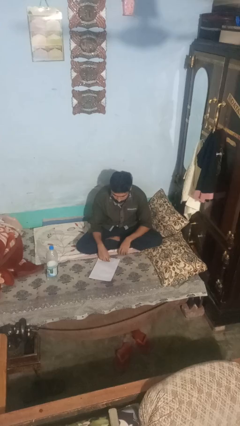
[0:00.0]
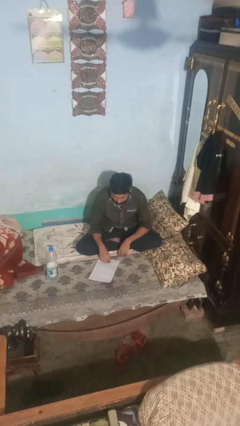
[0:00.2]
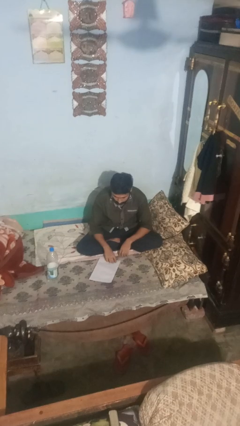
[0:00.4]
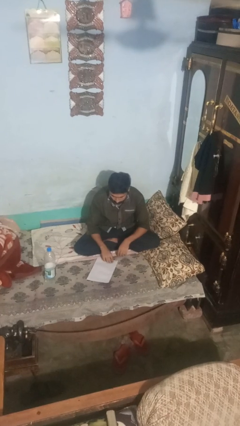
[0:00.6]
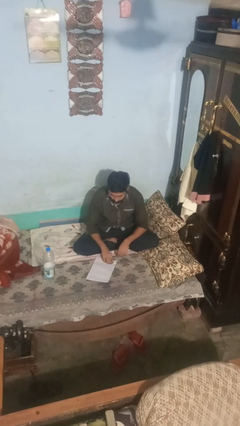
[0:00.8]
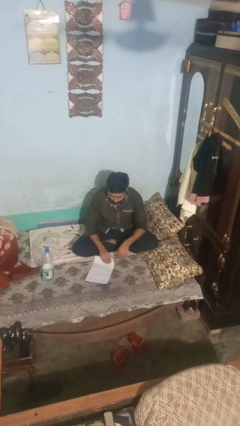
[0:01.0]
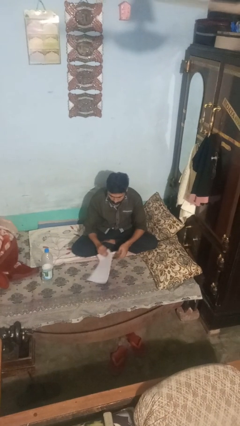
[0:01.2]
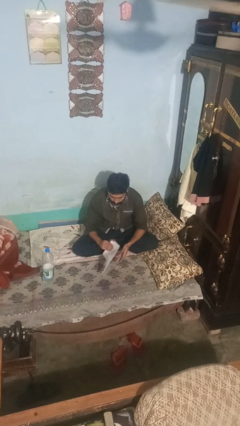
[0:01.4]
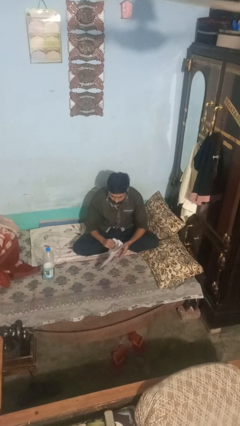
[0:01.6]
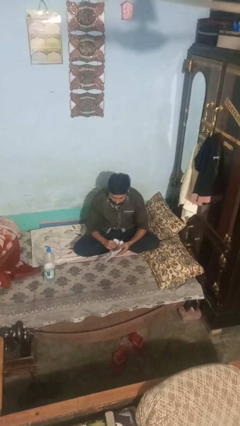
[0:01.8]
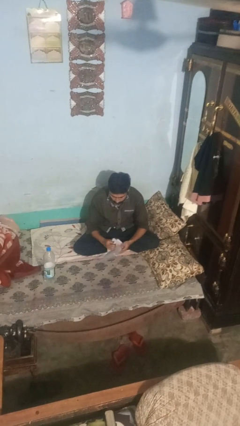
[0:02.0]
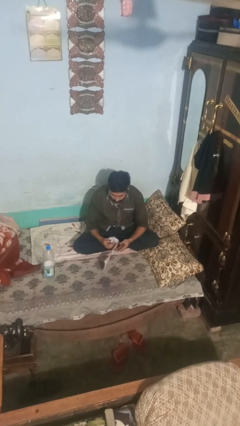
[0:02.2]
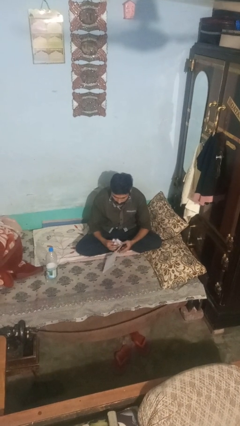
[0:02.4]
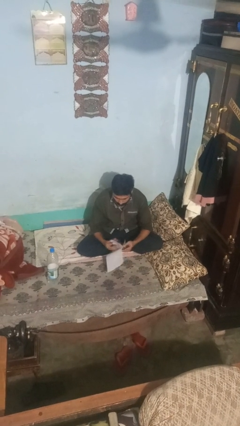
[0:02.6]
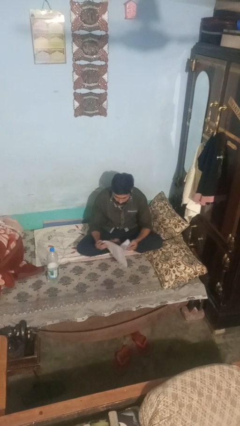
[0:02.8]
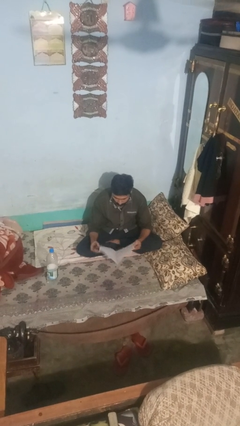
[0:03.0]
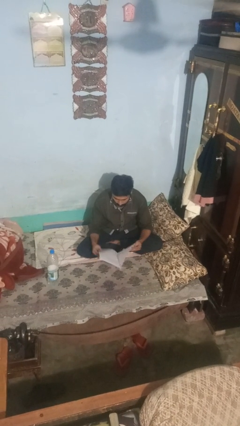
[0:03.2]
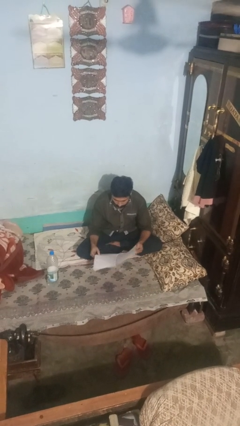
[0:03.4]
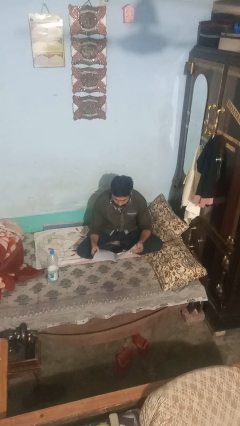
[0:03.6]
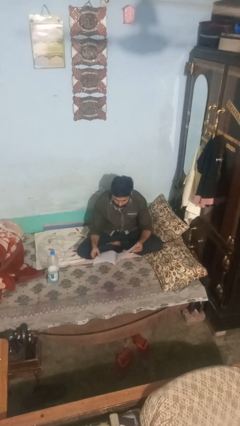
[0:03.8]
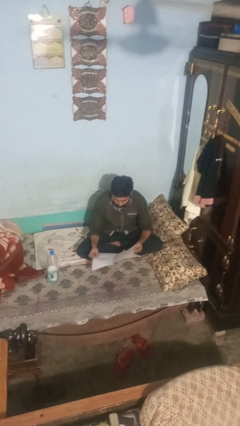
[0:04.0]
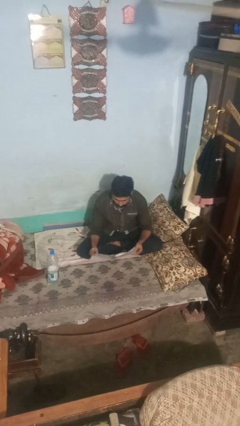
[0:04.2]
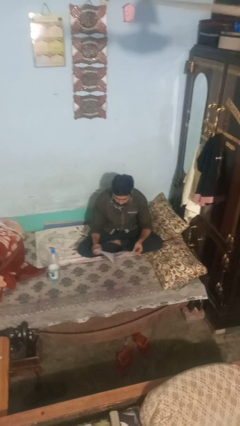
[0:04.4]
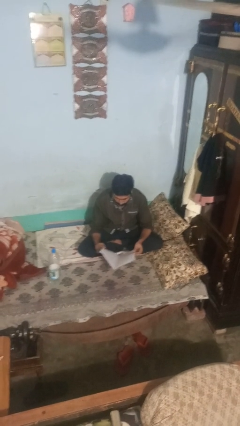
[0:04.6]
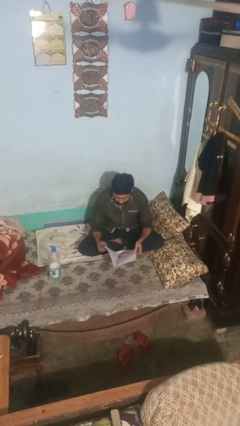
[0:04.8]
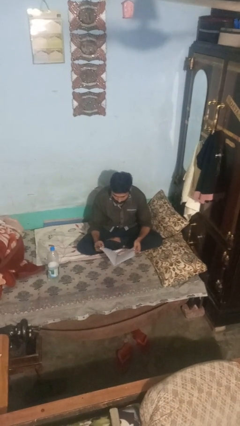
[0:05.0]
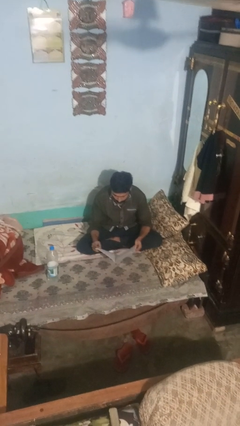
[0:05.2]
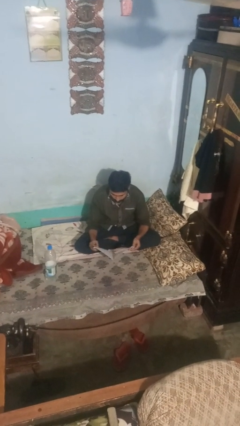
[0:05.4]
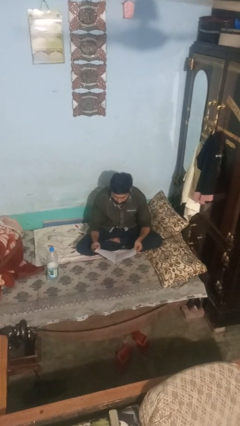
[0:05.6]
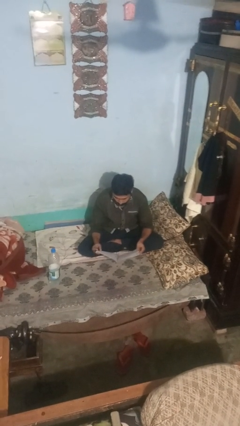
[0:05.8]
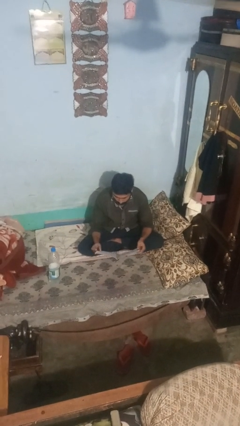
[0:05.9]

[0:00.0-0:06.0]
person reads newspaper

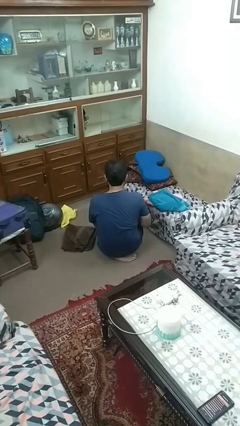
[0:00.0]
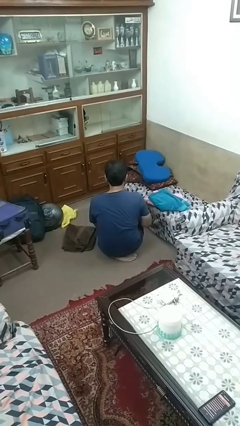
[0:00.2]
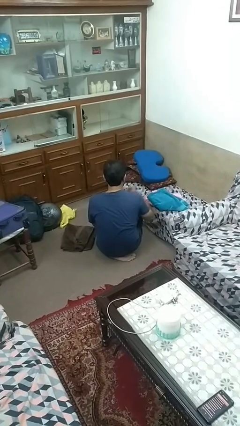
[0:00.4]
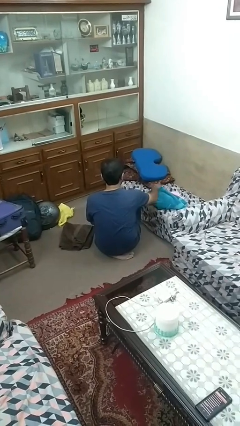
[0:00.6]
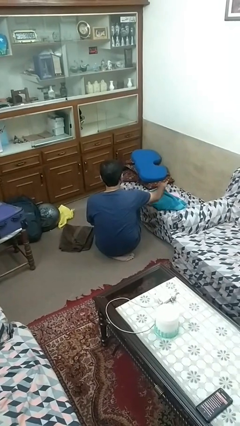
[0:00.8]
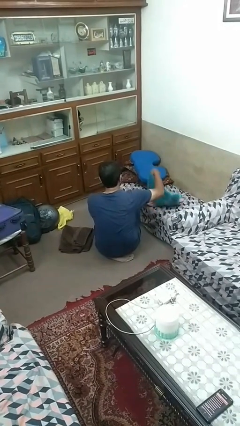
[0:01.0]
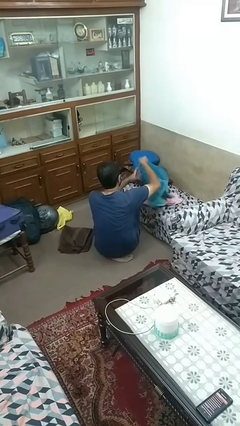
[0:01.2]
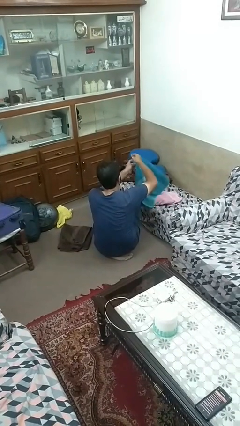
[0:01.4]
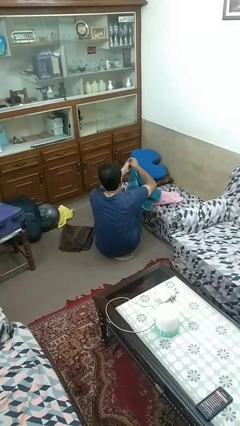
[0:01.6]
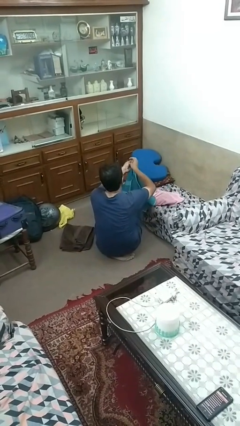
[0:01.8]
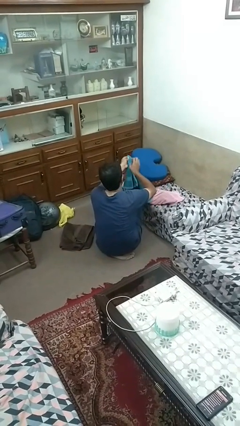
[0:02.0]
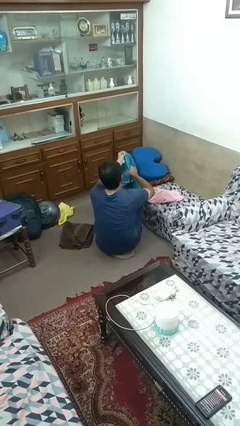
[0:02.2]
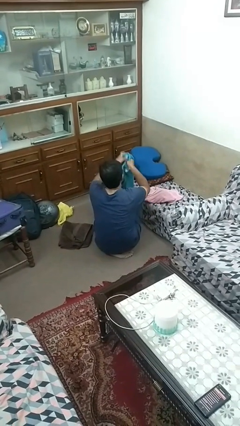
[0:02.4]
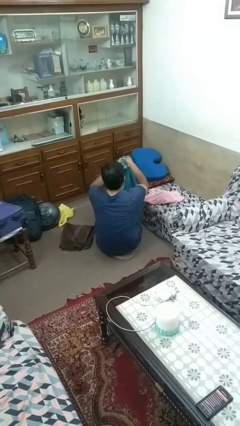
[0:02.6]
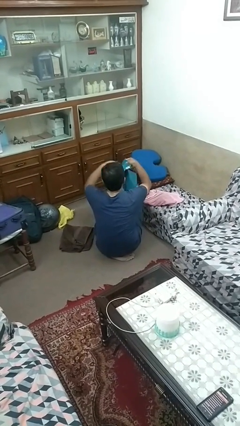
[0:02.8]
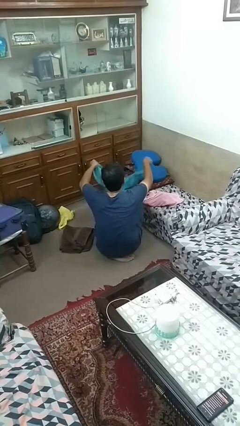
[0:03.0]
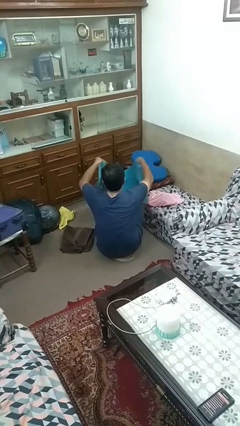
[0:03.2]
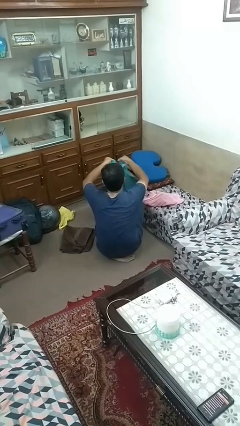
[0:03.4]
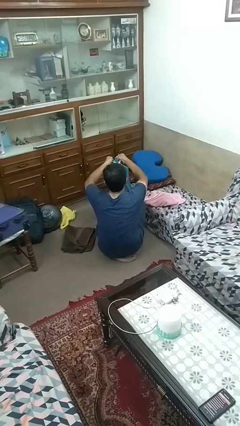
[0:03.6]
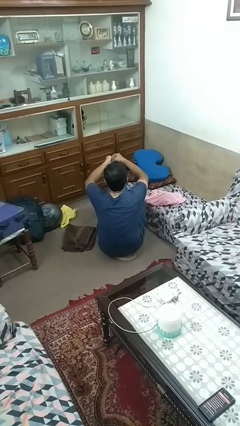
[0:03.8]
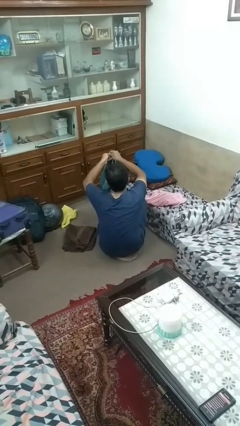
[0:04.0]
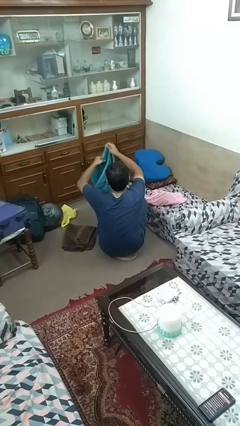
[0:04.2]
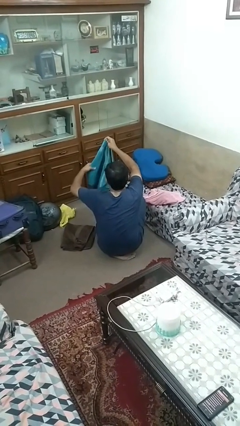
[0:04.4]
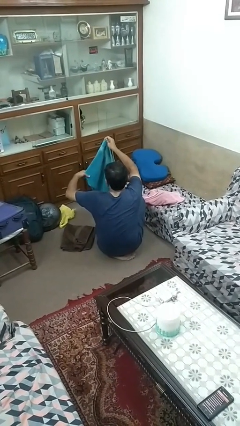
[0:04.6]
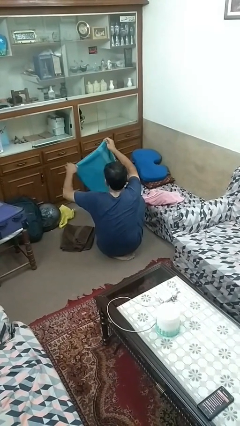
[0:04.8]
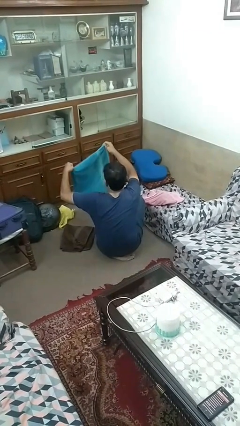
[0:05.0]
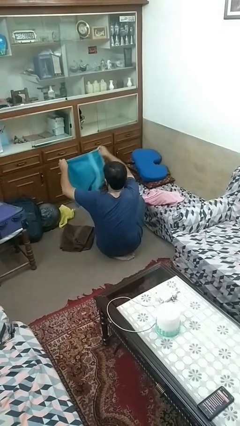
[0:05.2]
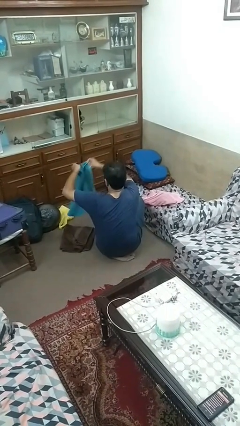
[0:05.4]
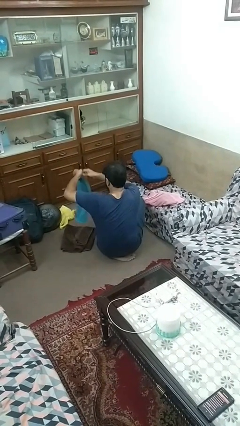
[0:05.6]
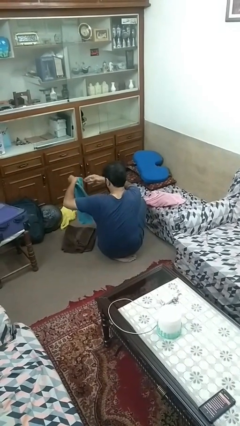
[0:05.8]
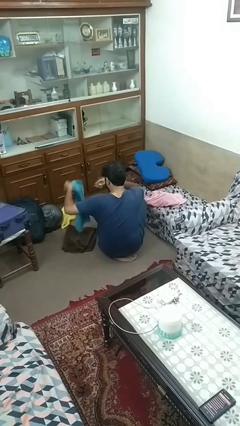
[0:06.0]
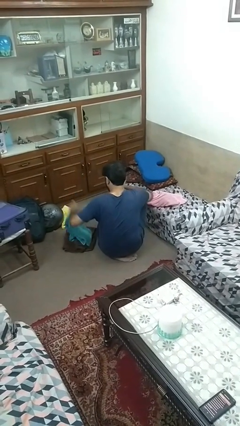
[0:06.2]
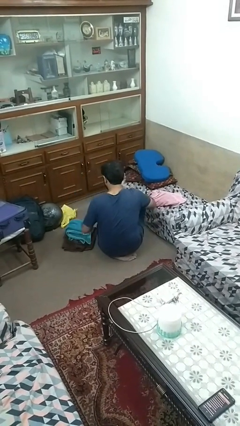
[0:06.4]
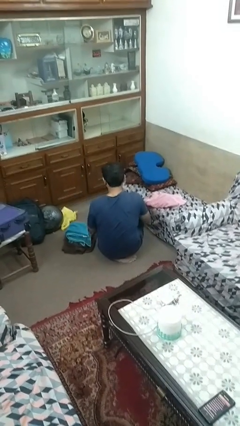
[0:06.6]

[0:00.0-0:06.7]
person folds towel

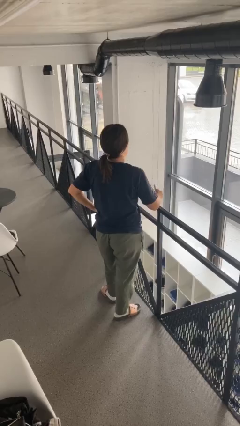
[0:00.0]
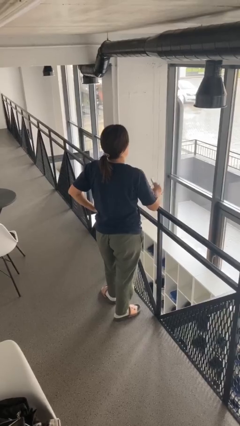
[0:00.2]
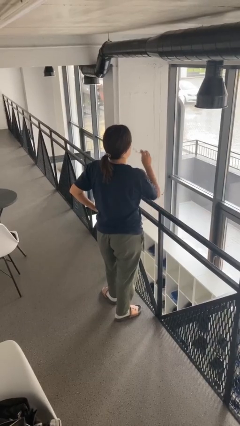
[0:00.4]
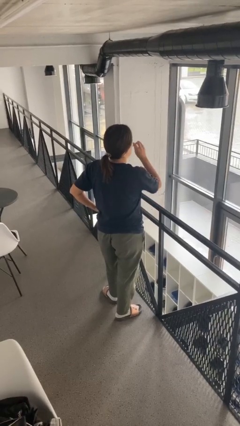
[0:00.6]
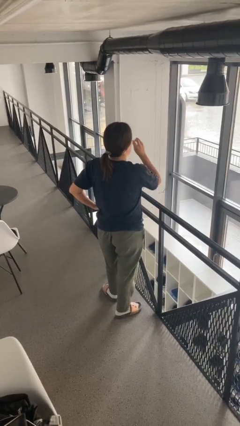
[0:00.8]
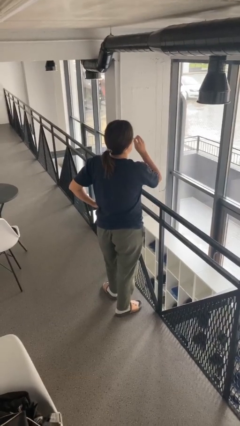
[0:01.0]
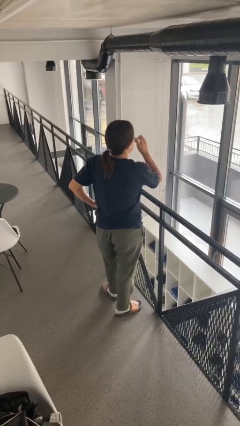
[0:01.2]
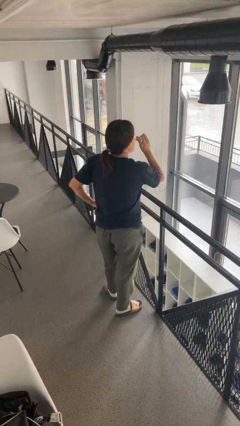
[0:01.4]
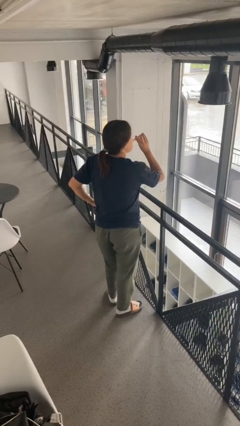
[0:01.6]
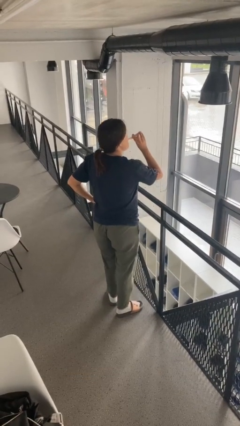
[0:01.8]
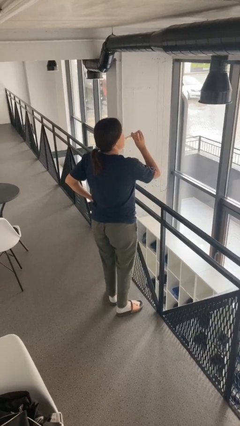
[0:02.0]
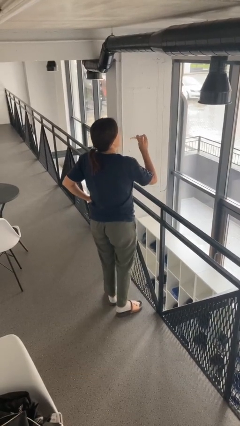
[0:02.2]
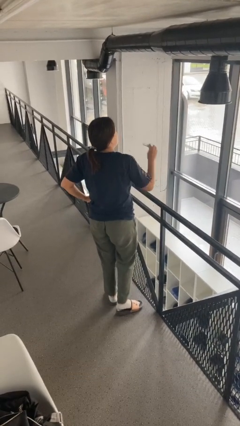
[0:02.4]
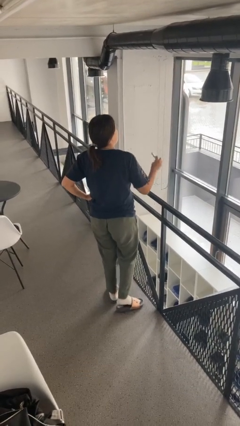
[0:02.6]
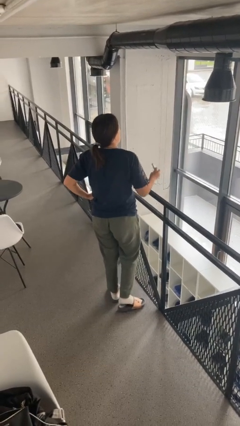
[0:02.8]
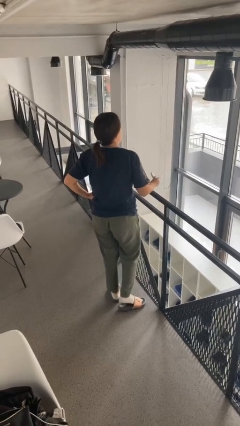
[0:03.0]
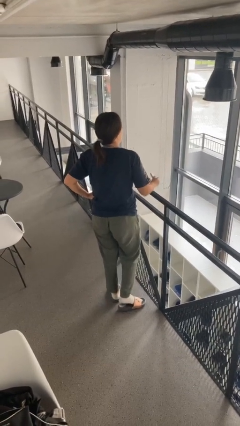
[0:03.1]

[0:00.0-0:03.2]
person vapes

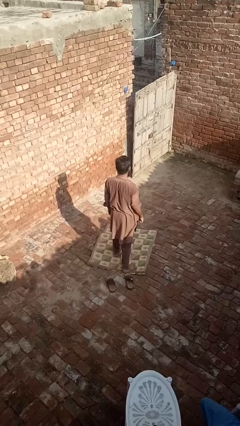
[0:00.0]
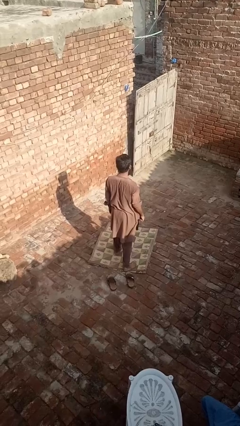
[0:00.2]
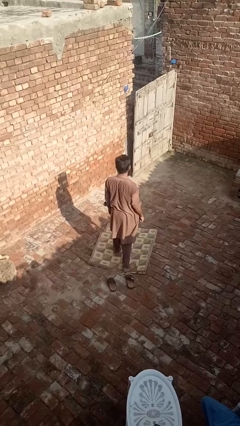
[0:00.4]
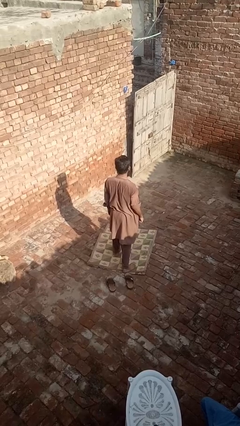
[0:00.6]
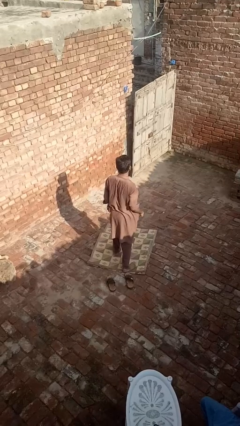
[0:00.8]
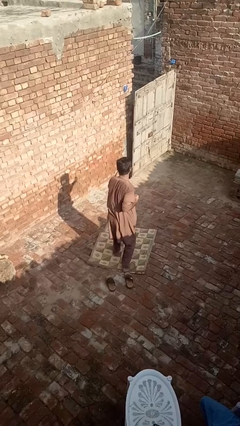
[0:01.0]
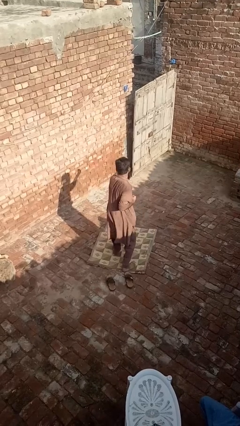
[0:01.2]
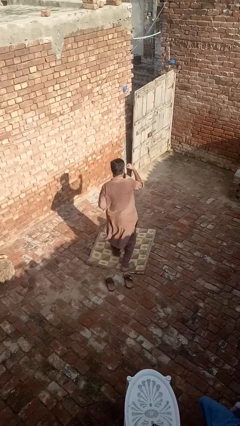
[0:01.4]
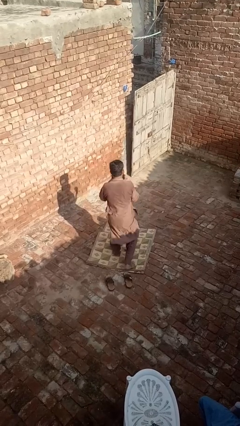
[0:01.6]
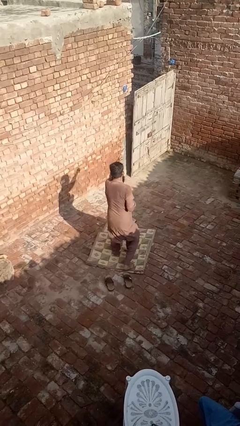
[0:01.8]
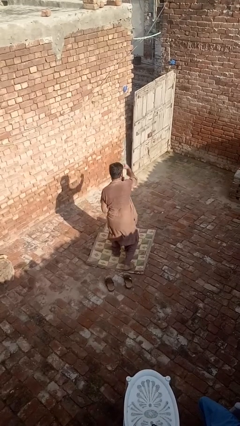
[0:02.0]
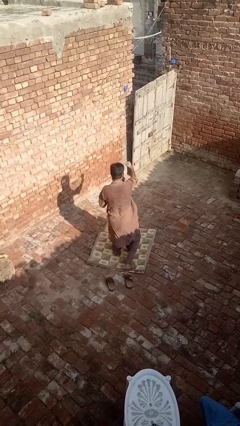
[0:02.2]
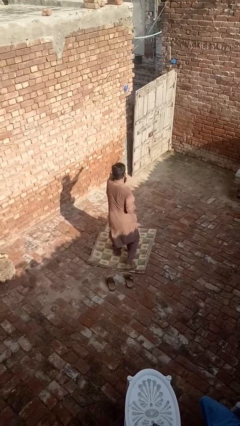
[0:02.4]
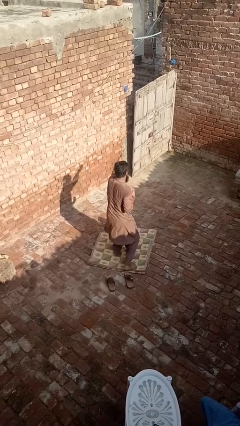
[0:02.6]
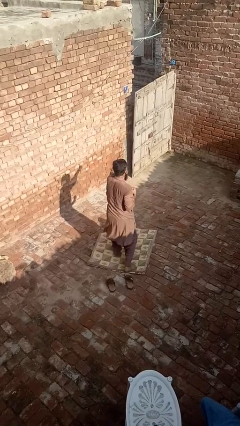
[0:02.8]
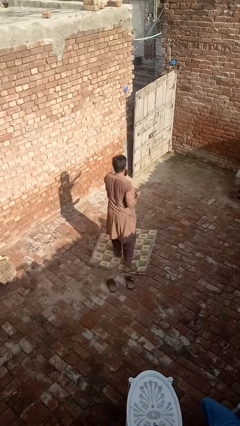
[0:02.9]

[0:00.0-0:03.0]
person punches
